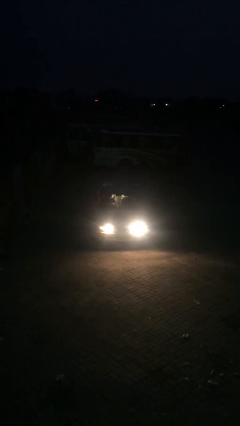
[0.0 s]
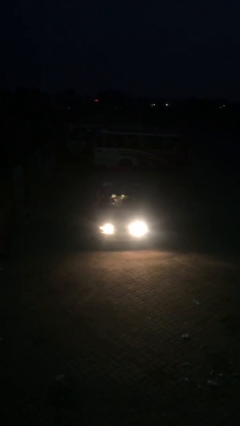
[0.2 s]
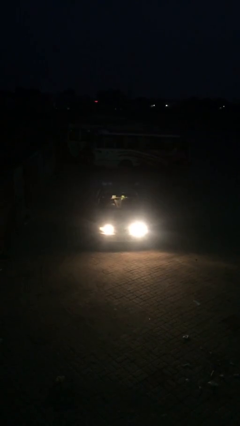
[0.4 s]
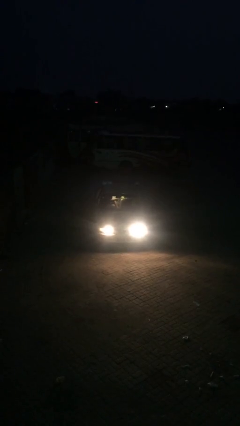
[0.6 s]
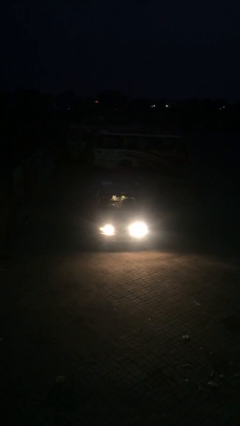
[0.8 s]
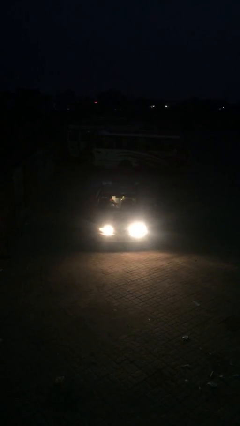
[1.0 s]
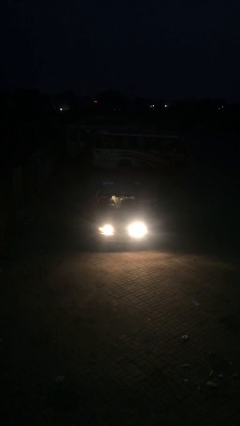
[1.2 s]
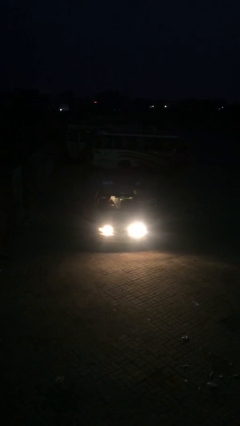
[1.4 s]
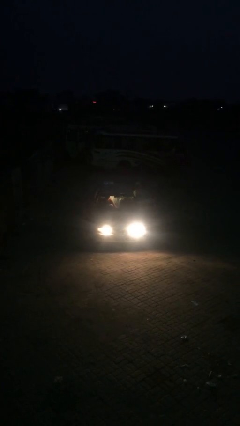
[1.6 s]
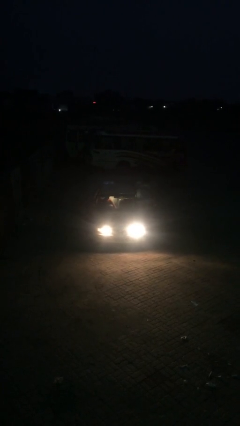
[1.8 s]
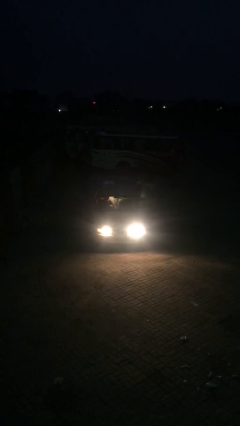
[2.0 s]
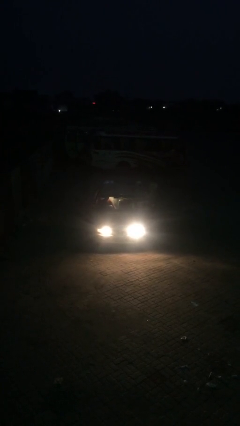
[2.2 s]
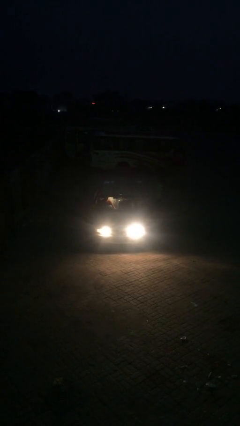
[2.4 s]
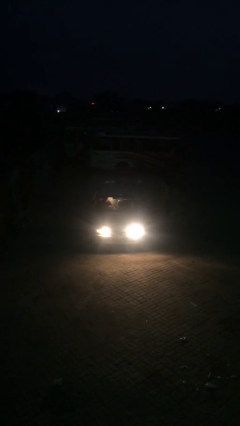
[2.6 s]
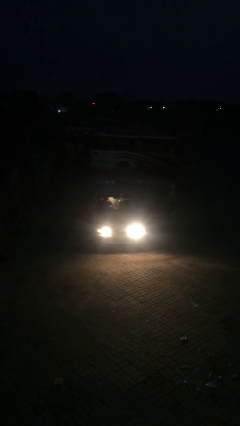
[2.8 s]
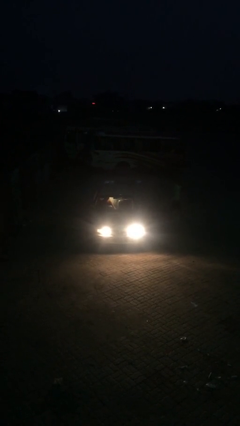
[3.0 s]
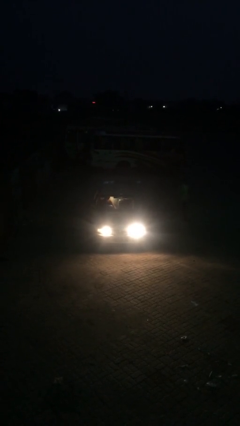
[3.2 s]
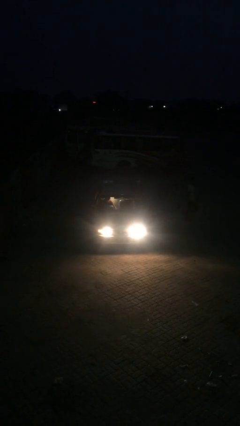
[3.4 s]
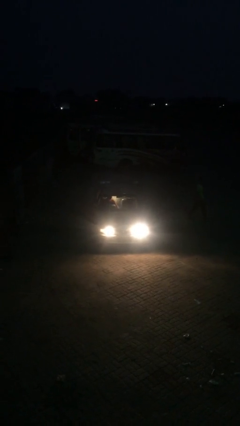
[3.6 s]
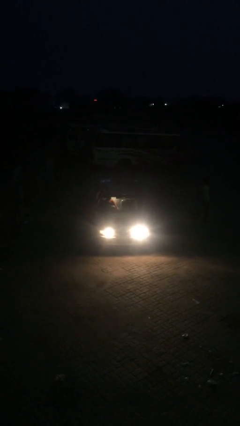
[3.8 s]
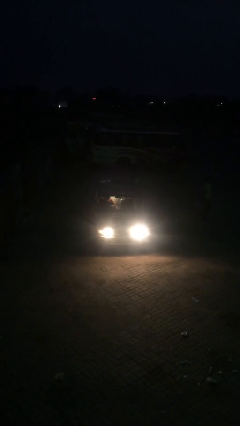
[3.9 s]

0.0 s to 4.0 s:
car drops off person

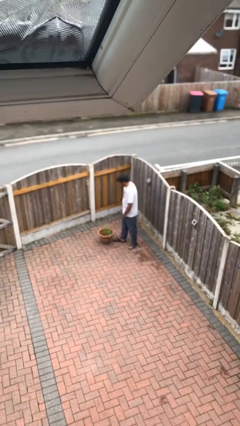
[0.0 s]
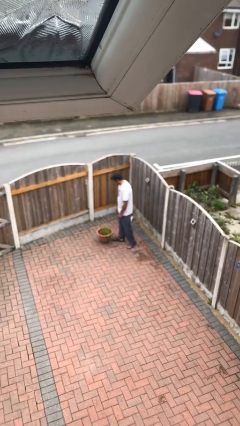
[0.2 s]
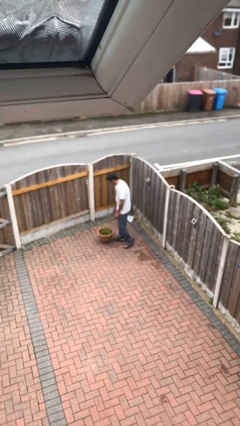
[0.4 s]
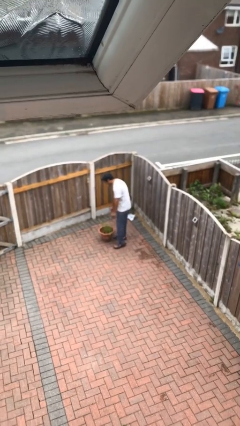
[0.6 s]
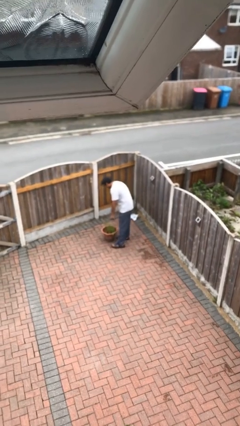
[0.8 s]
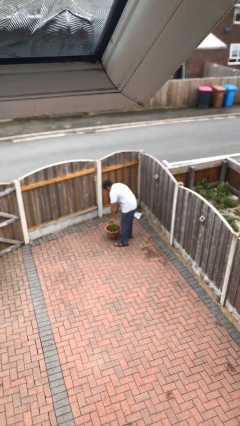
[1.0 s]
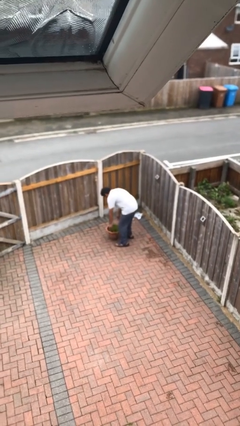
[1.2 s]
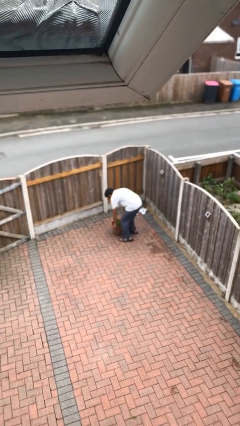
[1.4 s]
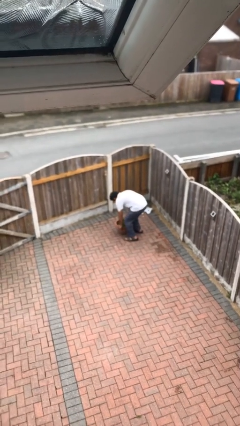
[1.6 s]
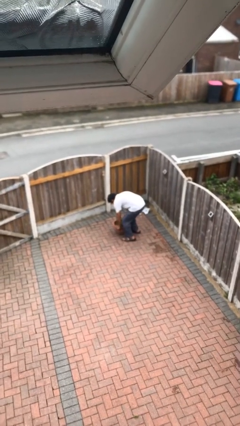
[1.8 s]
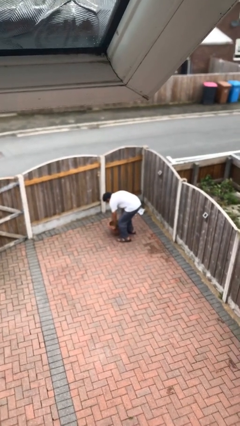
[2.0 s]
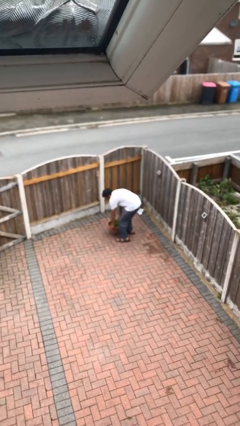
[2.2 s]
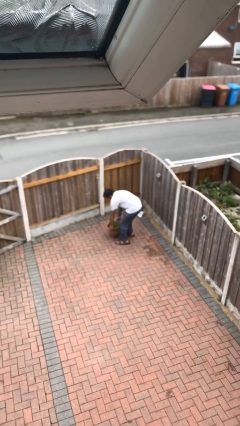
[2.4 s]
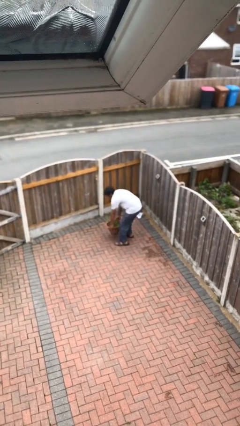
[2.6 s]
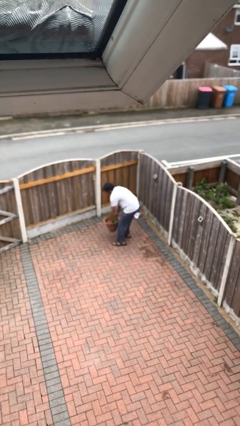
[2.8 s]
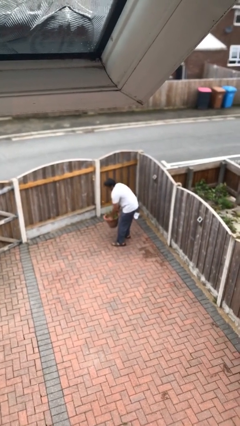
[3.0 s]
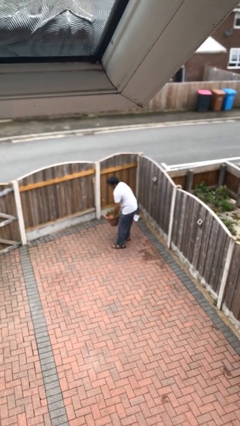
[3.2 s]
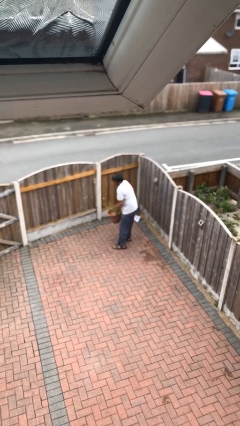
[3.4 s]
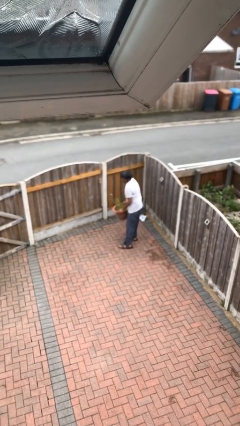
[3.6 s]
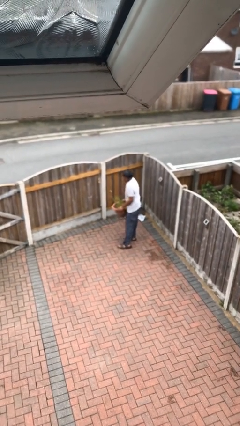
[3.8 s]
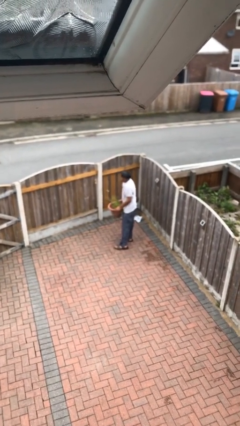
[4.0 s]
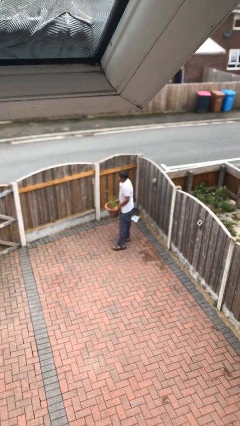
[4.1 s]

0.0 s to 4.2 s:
person picks up object from floor

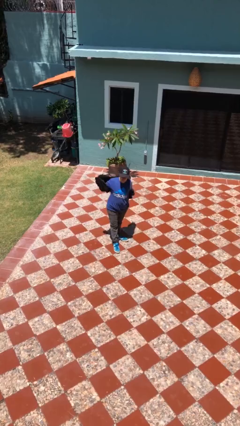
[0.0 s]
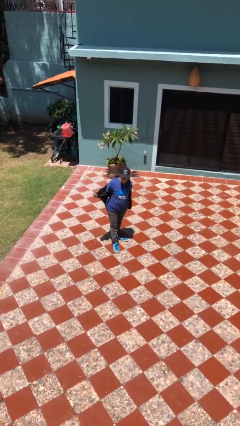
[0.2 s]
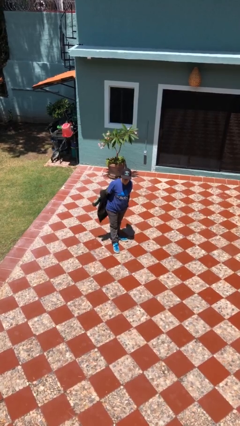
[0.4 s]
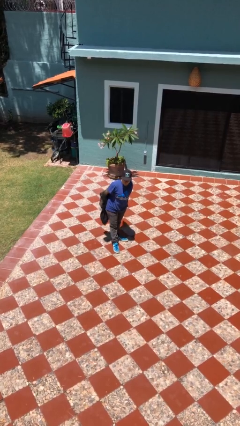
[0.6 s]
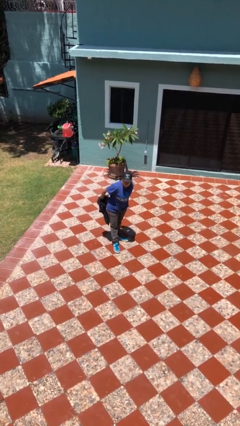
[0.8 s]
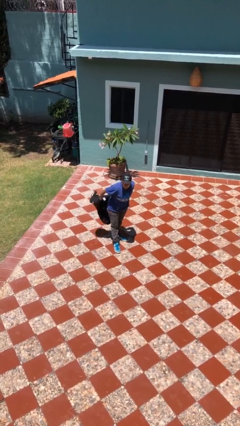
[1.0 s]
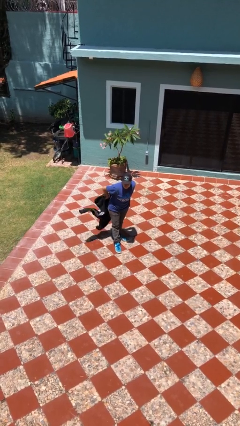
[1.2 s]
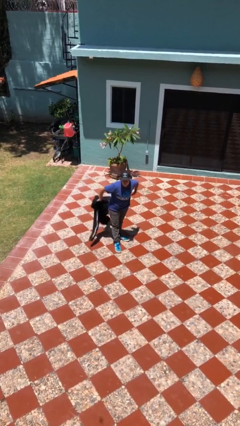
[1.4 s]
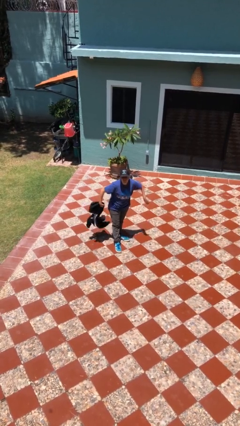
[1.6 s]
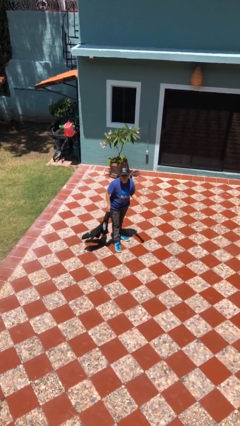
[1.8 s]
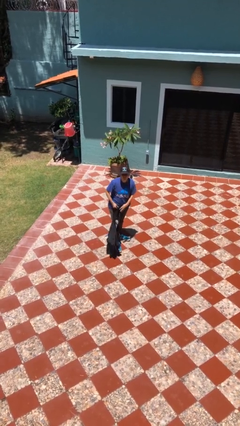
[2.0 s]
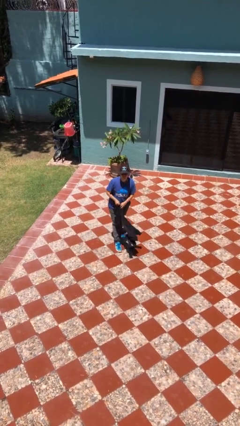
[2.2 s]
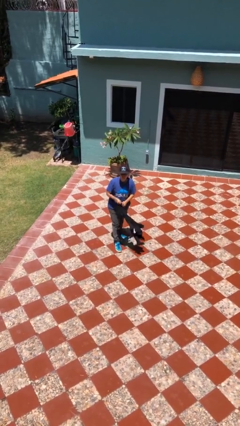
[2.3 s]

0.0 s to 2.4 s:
person takes off jacket

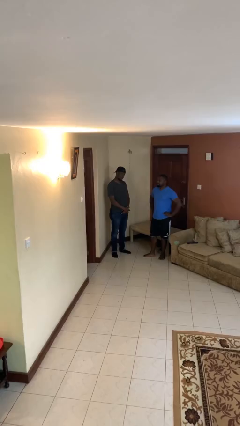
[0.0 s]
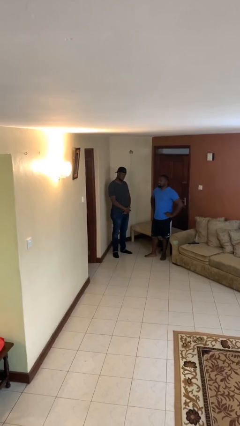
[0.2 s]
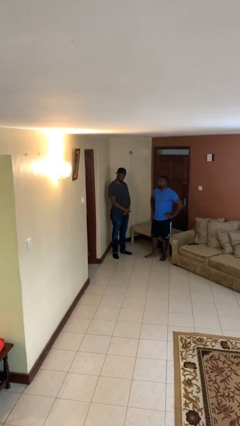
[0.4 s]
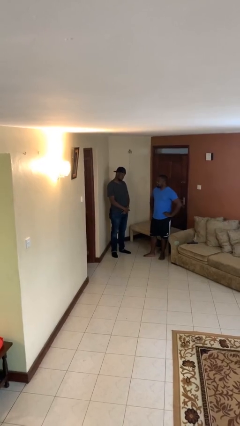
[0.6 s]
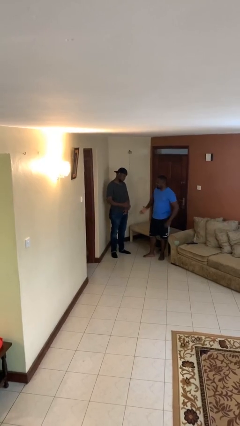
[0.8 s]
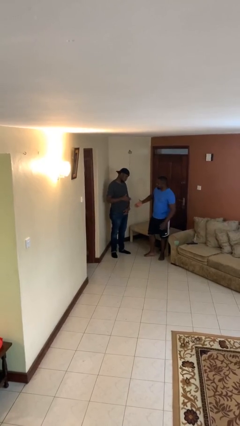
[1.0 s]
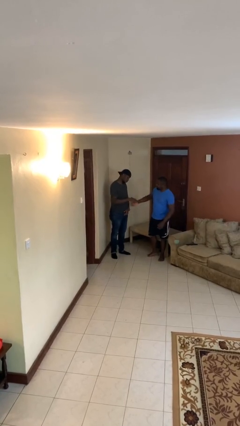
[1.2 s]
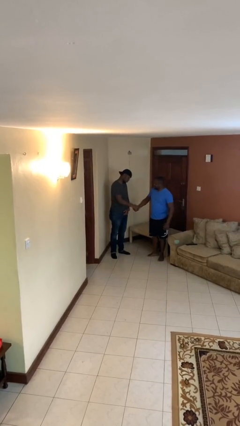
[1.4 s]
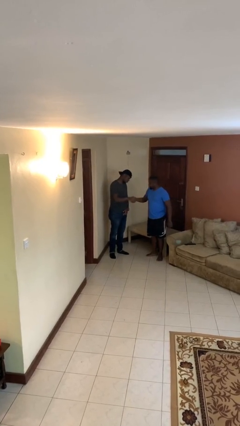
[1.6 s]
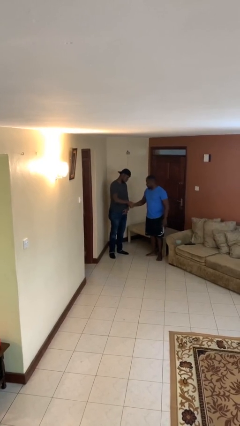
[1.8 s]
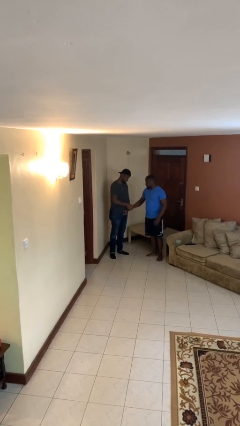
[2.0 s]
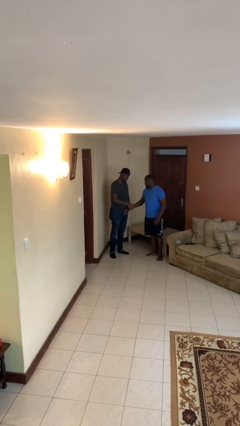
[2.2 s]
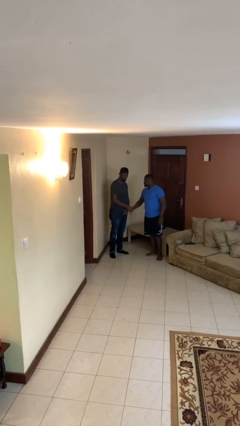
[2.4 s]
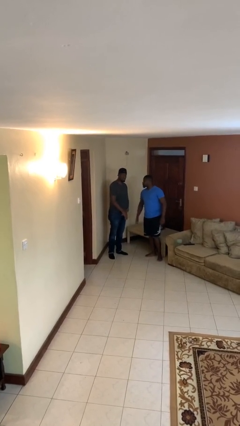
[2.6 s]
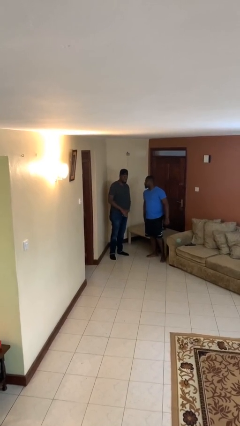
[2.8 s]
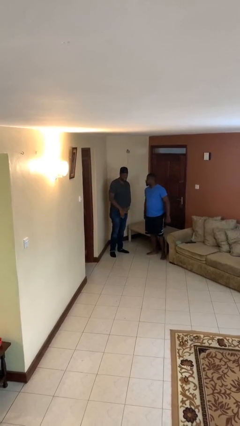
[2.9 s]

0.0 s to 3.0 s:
person shakes hand

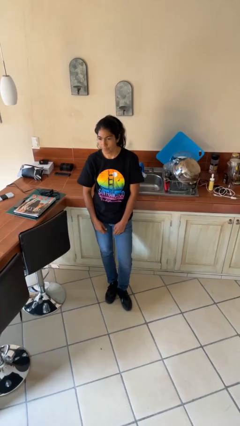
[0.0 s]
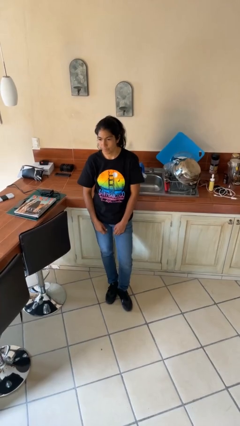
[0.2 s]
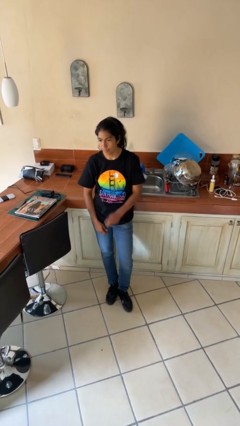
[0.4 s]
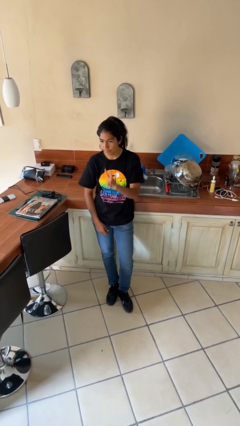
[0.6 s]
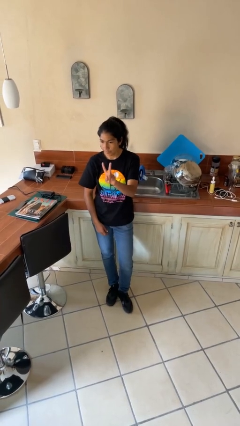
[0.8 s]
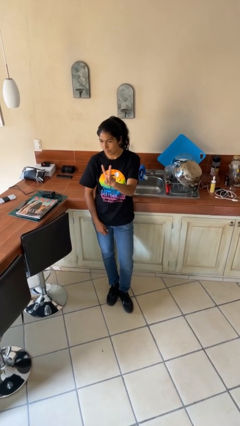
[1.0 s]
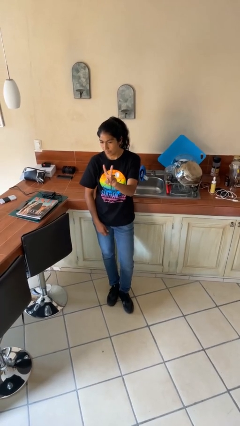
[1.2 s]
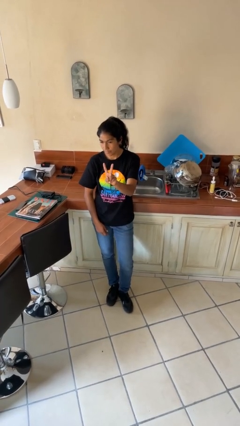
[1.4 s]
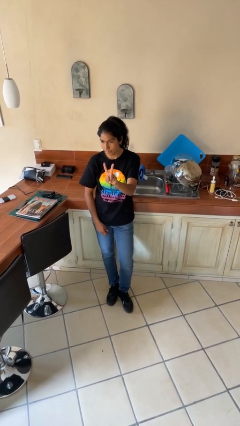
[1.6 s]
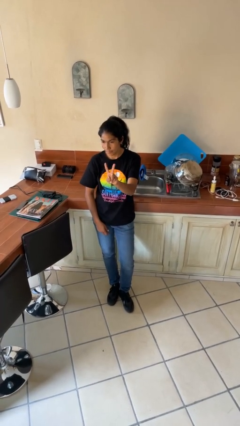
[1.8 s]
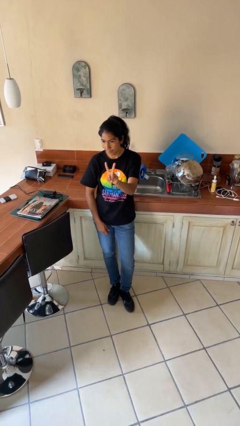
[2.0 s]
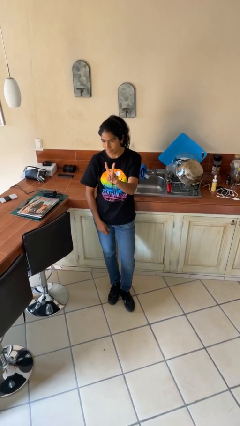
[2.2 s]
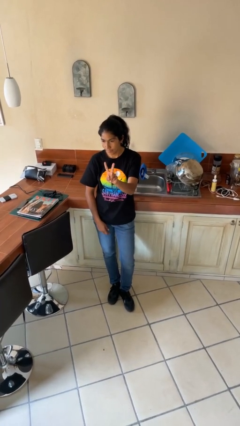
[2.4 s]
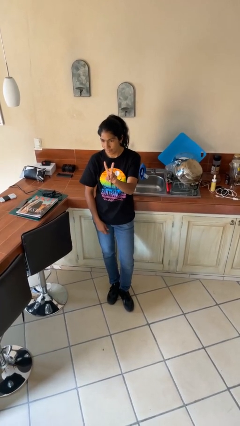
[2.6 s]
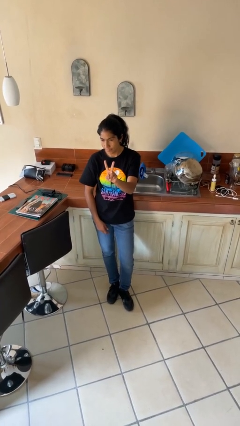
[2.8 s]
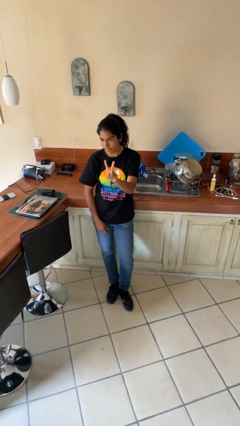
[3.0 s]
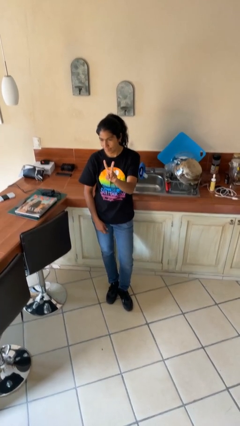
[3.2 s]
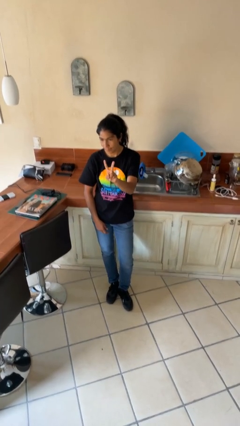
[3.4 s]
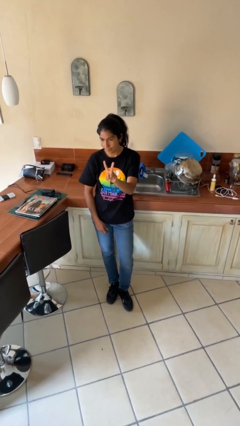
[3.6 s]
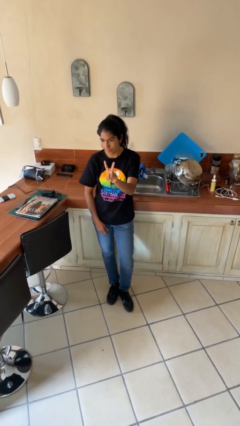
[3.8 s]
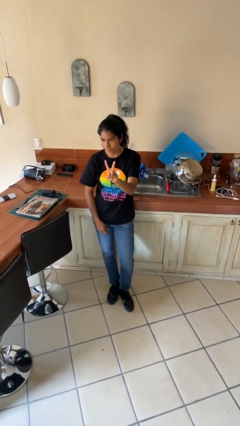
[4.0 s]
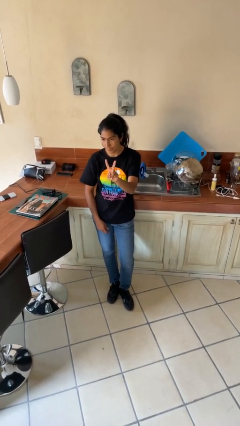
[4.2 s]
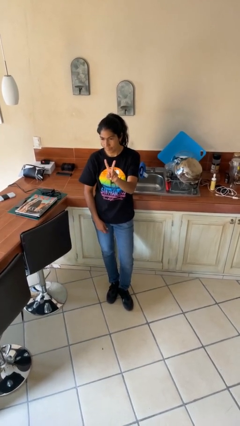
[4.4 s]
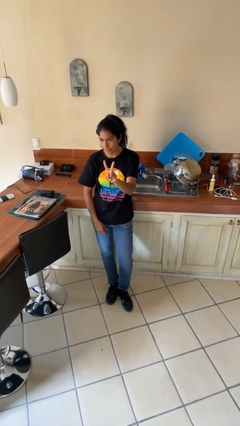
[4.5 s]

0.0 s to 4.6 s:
person gestures peace
